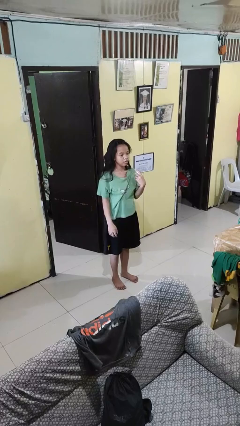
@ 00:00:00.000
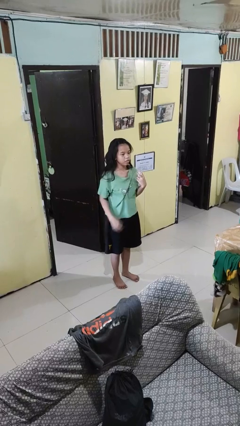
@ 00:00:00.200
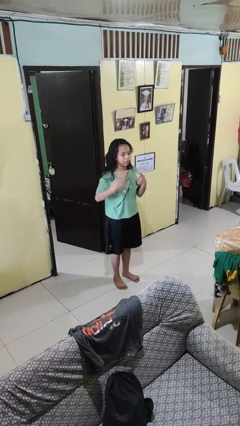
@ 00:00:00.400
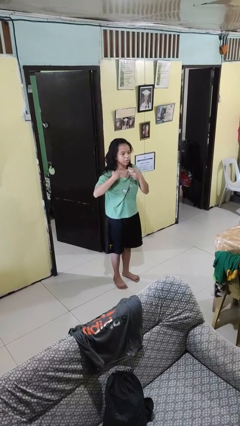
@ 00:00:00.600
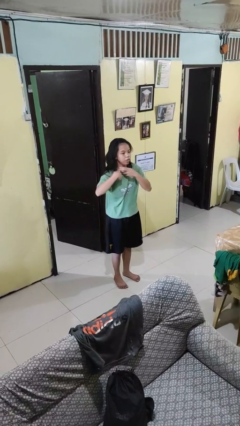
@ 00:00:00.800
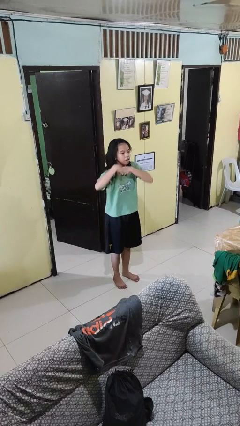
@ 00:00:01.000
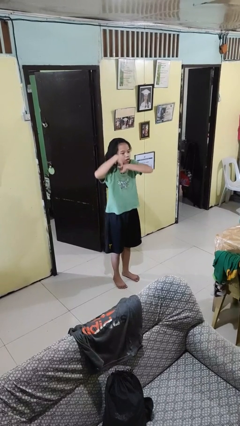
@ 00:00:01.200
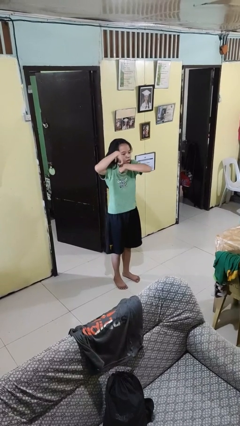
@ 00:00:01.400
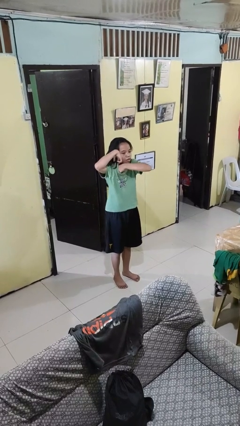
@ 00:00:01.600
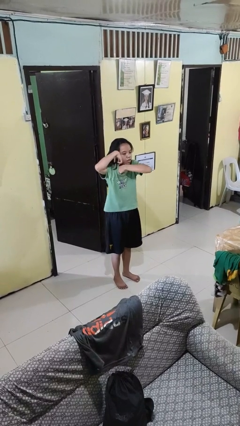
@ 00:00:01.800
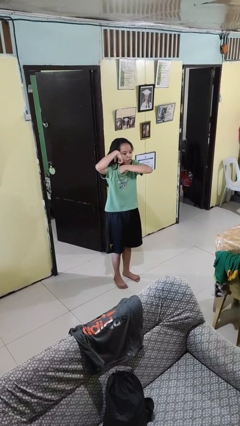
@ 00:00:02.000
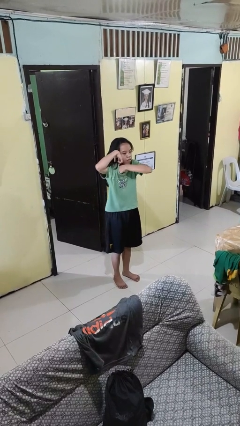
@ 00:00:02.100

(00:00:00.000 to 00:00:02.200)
person applies deodorant

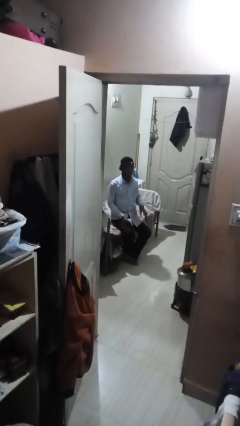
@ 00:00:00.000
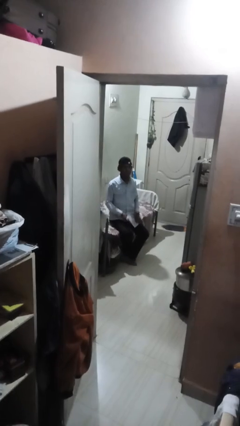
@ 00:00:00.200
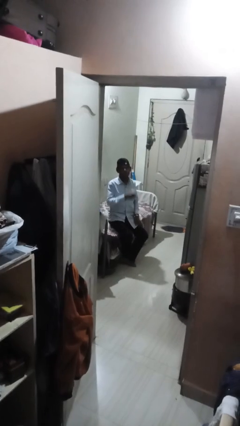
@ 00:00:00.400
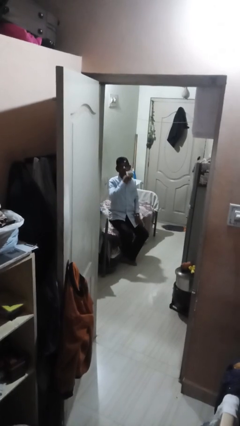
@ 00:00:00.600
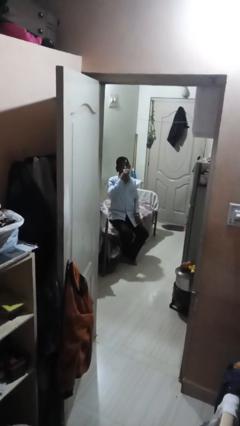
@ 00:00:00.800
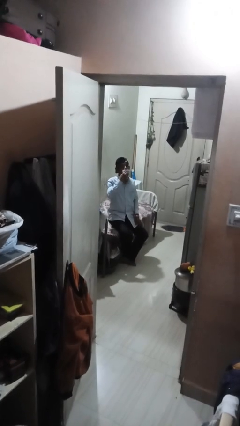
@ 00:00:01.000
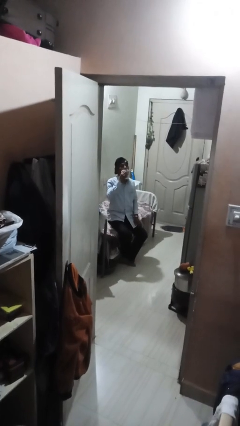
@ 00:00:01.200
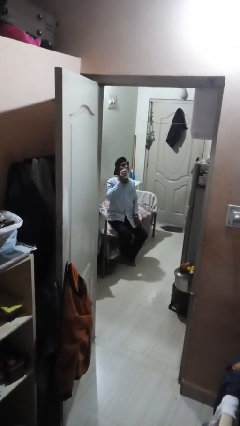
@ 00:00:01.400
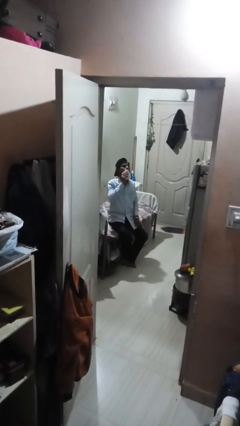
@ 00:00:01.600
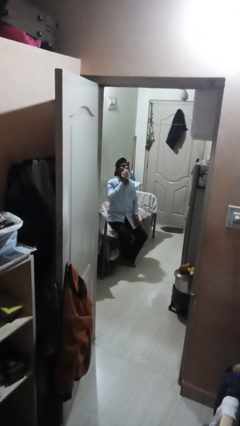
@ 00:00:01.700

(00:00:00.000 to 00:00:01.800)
person wipes mouth with napkin

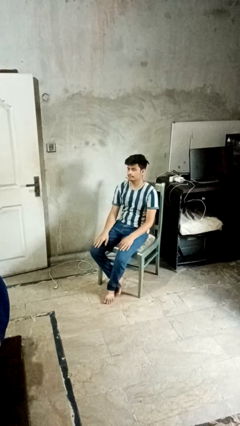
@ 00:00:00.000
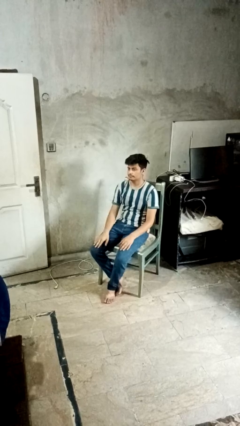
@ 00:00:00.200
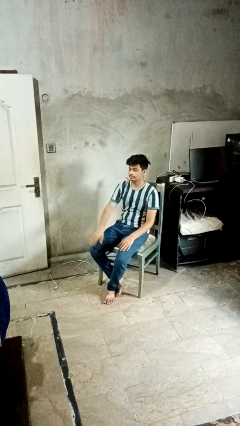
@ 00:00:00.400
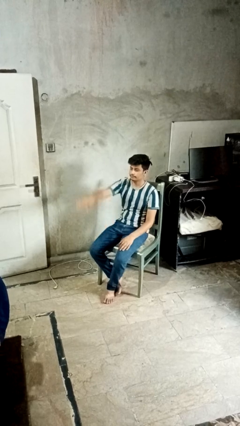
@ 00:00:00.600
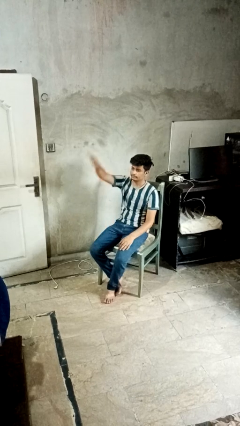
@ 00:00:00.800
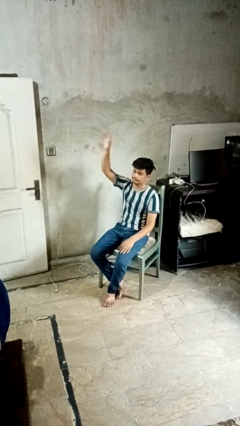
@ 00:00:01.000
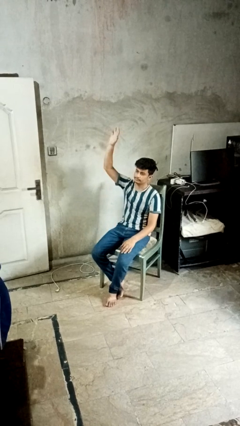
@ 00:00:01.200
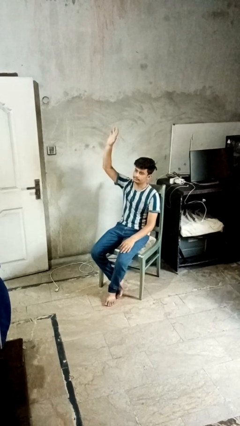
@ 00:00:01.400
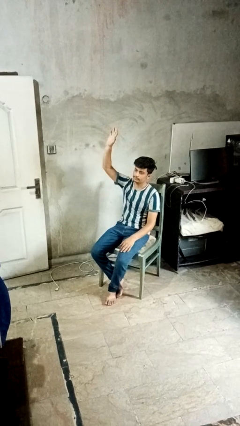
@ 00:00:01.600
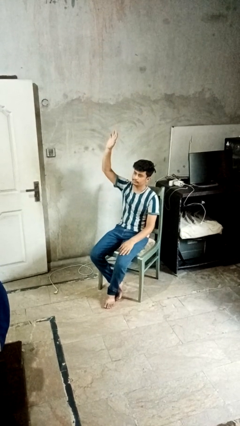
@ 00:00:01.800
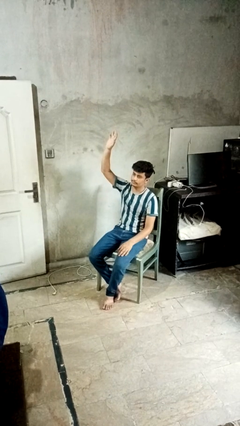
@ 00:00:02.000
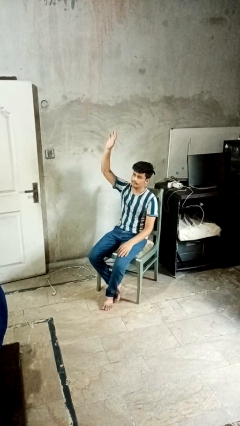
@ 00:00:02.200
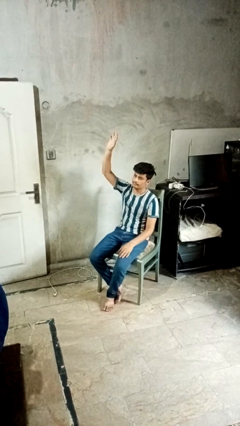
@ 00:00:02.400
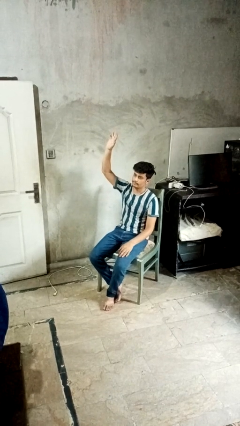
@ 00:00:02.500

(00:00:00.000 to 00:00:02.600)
person gestures raise hand

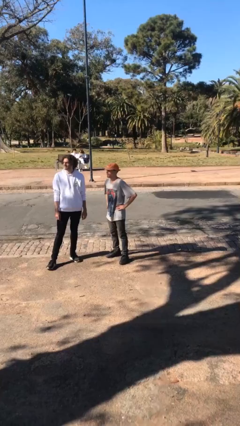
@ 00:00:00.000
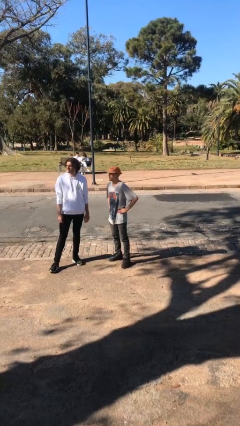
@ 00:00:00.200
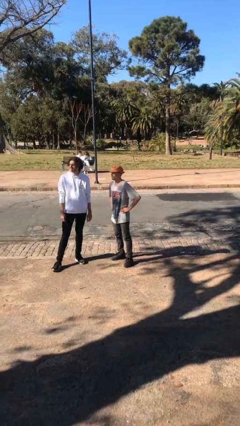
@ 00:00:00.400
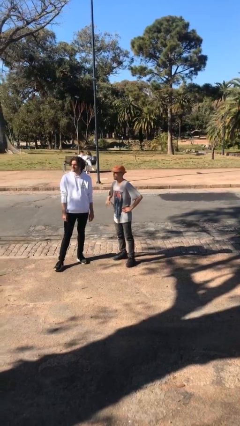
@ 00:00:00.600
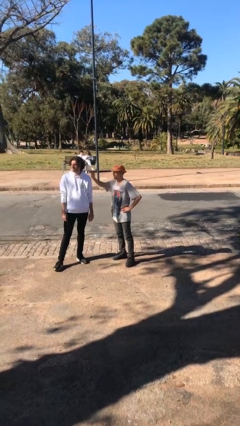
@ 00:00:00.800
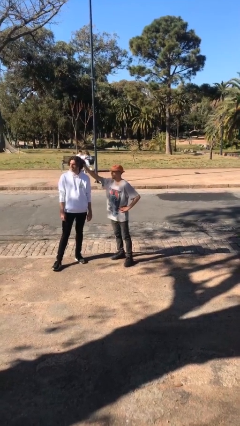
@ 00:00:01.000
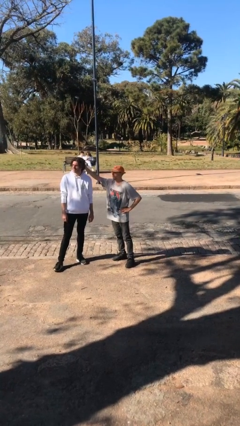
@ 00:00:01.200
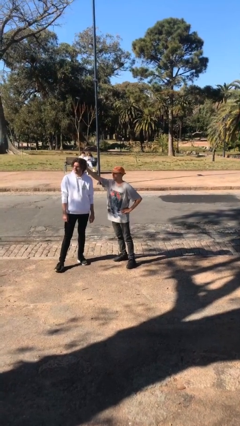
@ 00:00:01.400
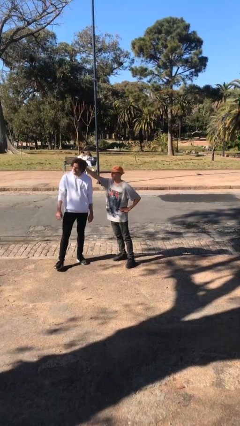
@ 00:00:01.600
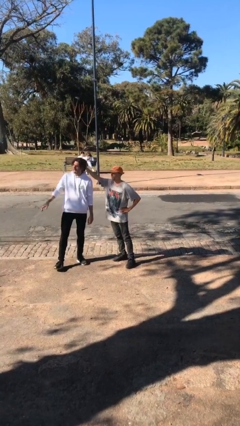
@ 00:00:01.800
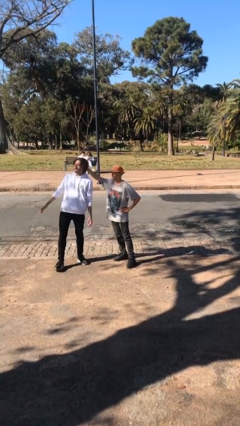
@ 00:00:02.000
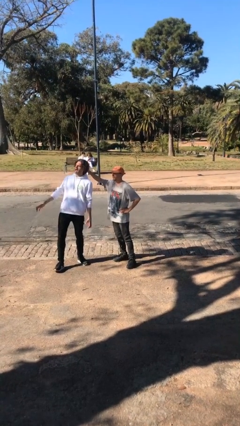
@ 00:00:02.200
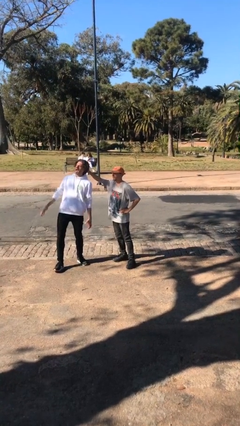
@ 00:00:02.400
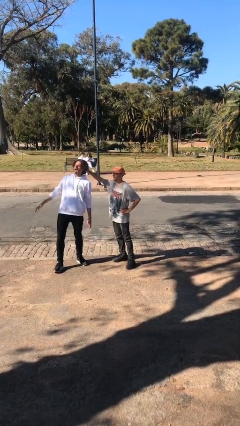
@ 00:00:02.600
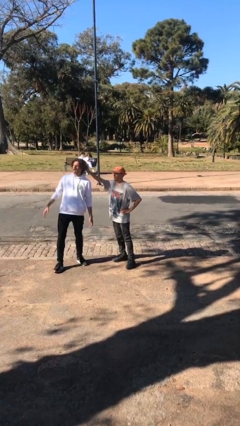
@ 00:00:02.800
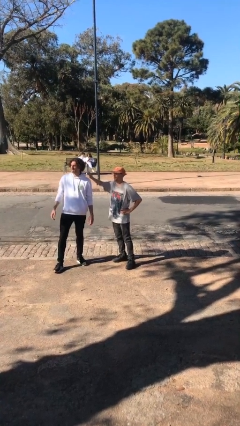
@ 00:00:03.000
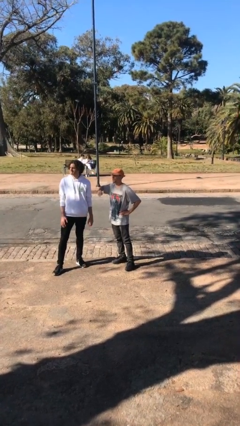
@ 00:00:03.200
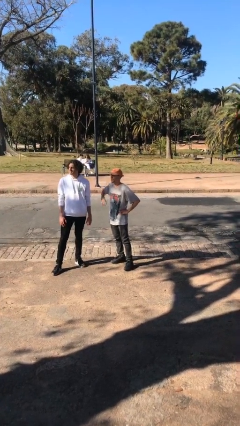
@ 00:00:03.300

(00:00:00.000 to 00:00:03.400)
person grabs person by hair

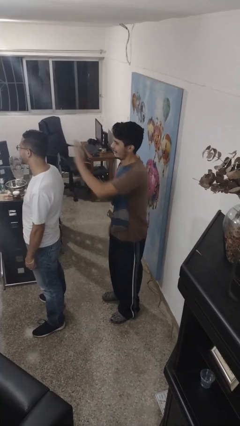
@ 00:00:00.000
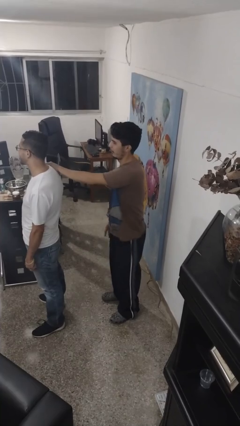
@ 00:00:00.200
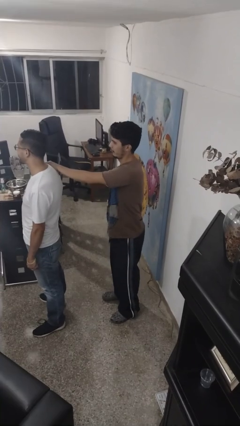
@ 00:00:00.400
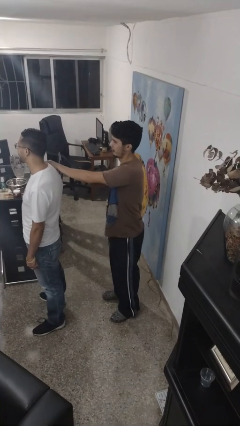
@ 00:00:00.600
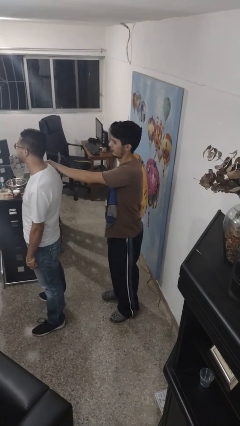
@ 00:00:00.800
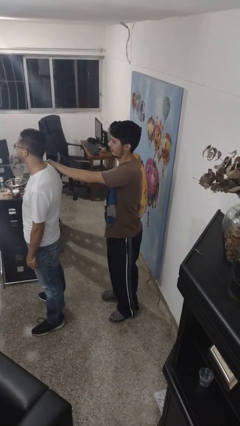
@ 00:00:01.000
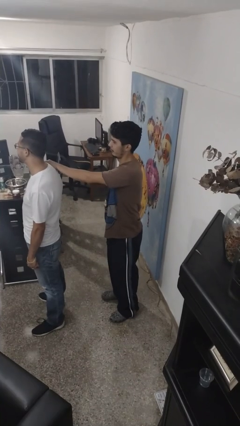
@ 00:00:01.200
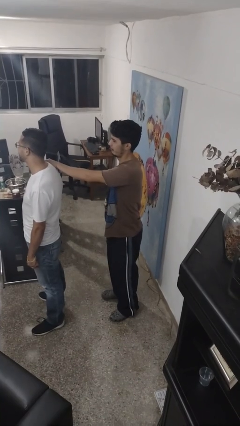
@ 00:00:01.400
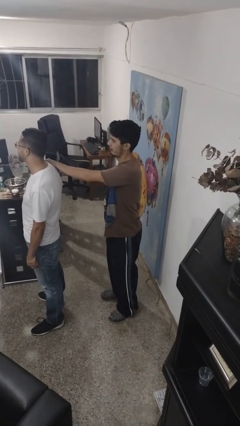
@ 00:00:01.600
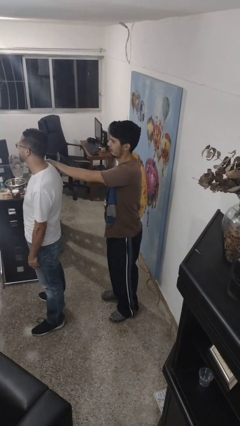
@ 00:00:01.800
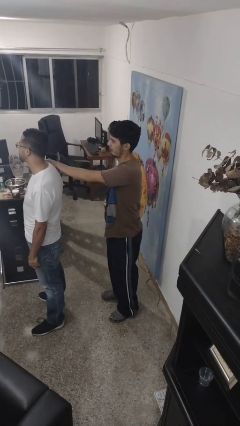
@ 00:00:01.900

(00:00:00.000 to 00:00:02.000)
person grabs person by shoulder

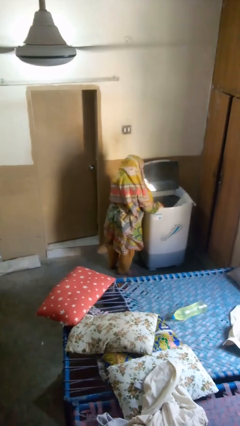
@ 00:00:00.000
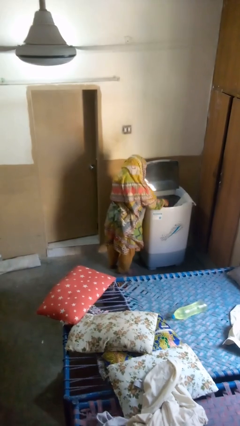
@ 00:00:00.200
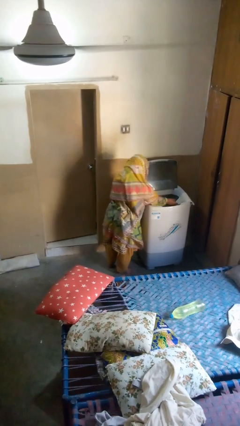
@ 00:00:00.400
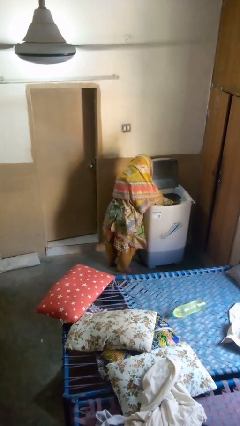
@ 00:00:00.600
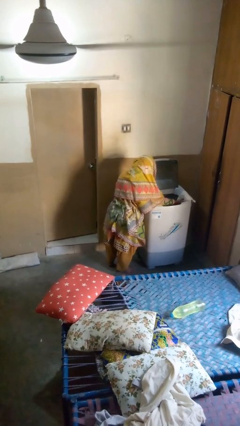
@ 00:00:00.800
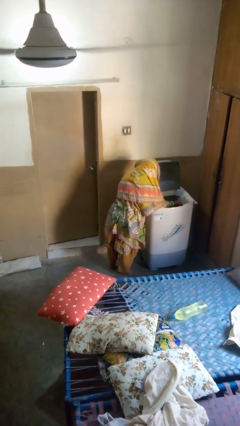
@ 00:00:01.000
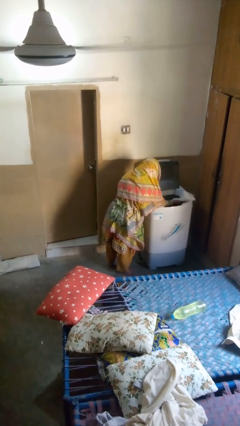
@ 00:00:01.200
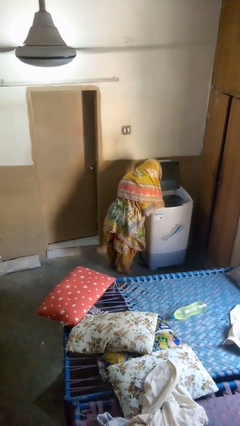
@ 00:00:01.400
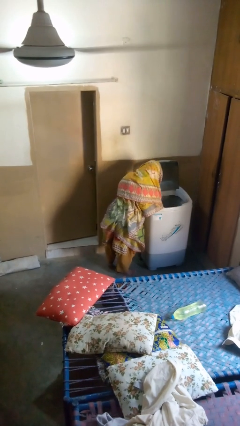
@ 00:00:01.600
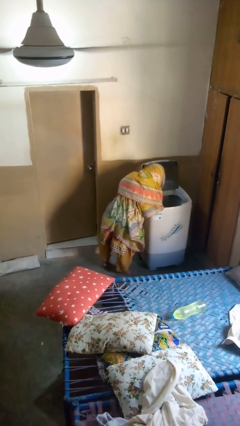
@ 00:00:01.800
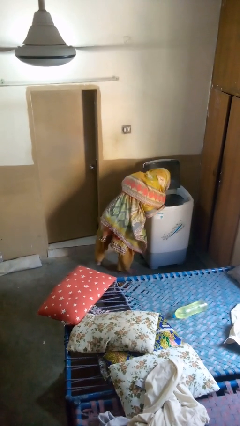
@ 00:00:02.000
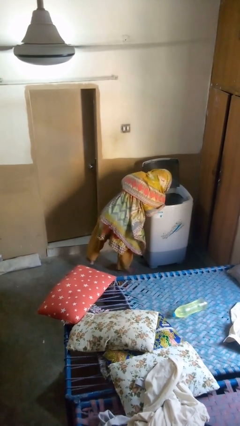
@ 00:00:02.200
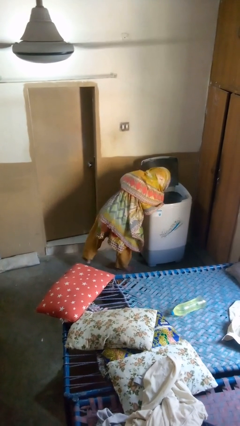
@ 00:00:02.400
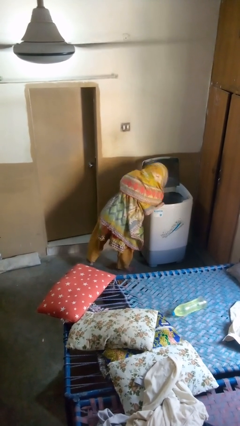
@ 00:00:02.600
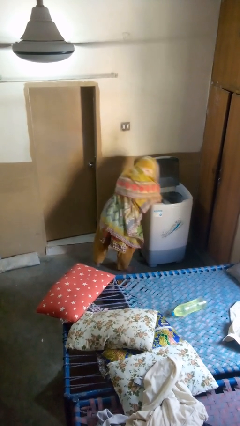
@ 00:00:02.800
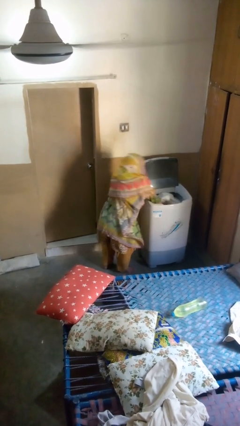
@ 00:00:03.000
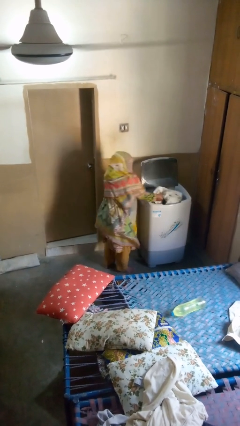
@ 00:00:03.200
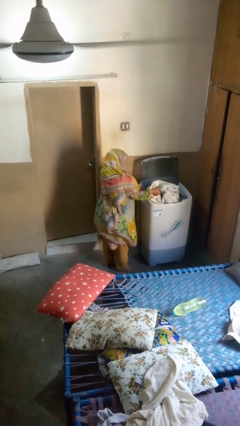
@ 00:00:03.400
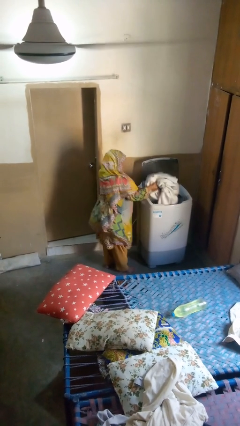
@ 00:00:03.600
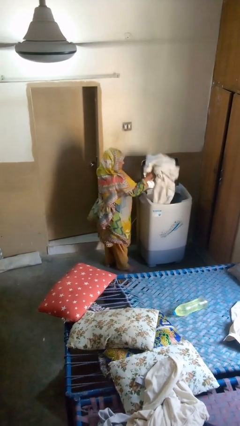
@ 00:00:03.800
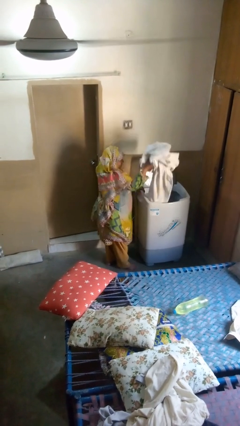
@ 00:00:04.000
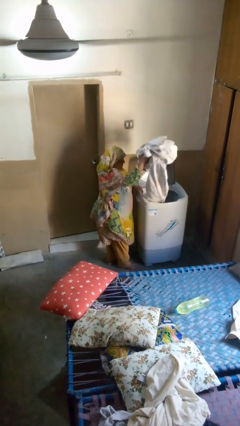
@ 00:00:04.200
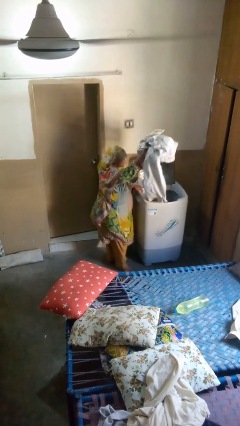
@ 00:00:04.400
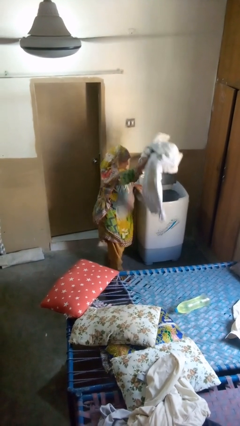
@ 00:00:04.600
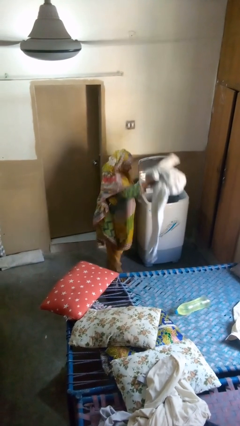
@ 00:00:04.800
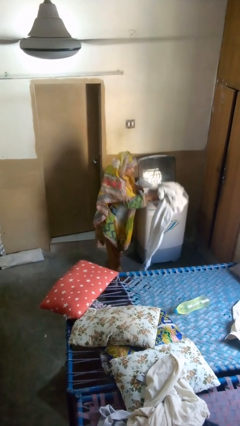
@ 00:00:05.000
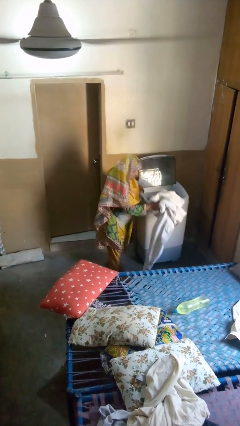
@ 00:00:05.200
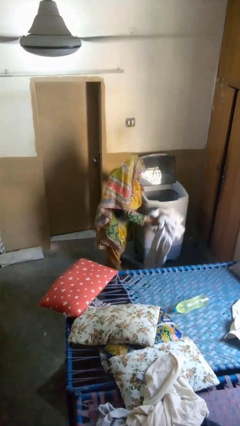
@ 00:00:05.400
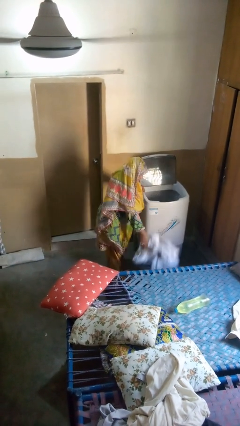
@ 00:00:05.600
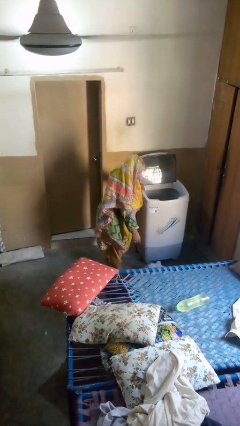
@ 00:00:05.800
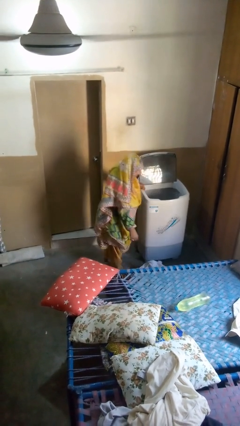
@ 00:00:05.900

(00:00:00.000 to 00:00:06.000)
person unloads clotheswasher
